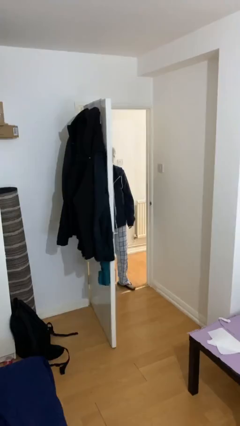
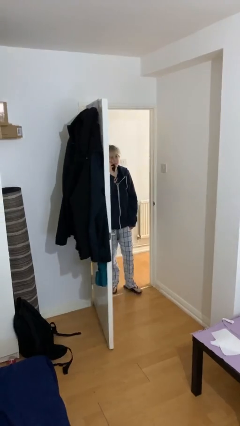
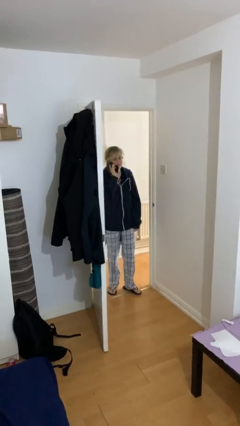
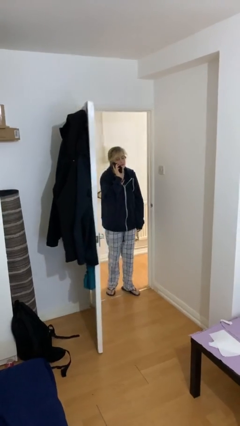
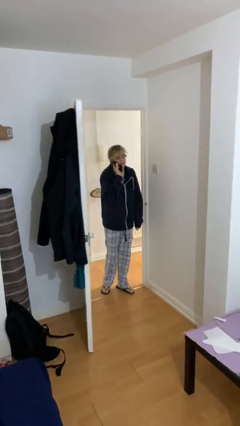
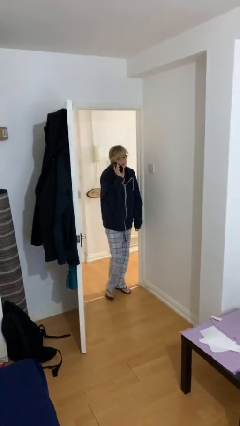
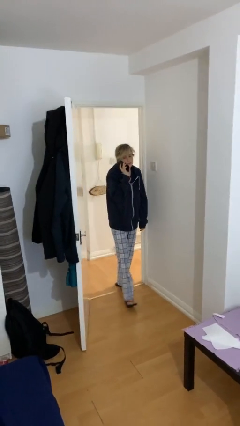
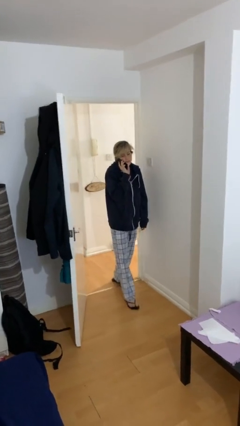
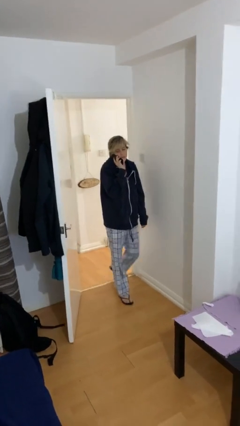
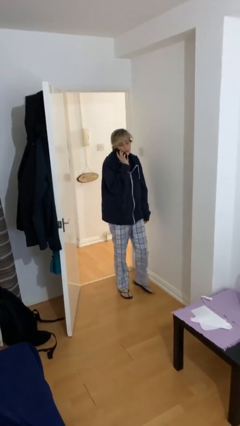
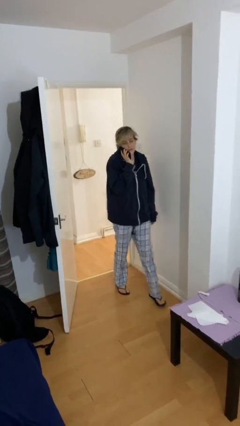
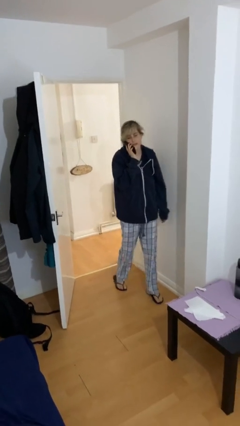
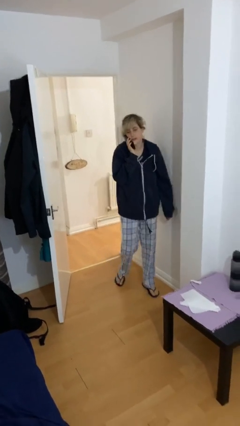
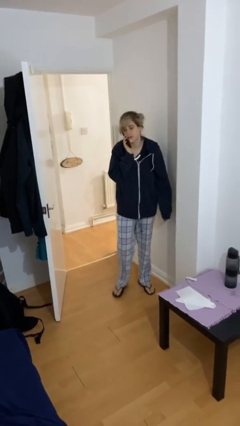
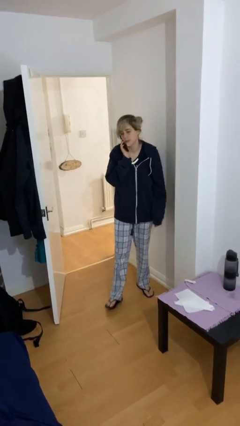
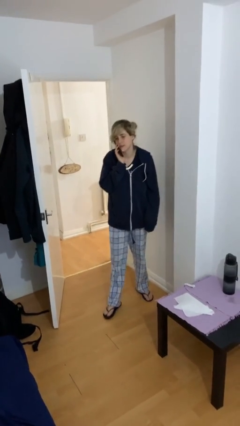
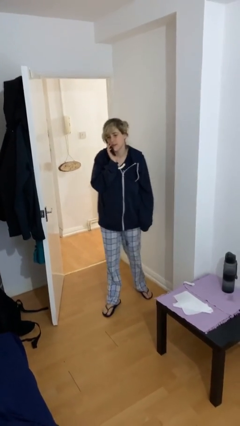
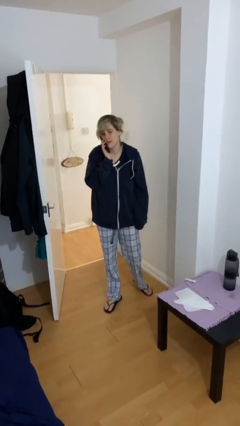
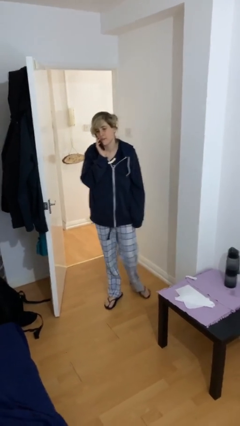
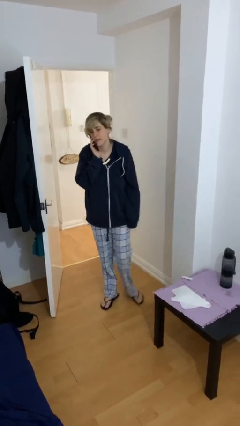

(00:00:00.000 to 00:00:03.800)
person enters scene through structure

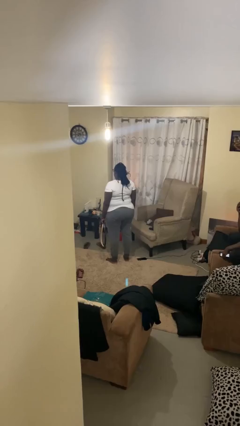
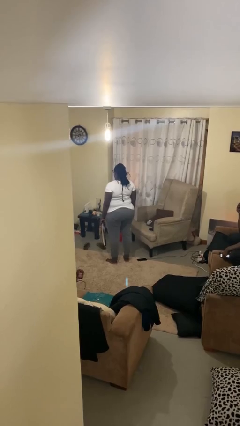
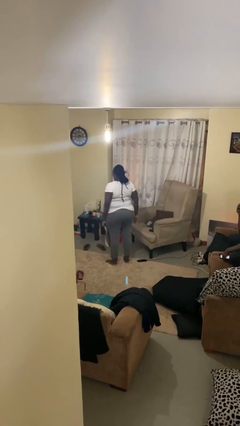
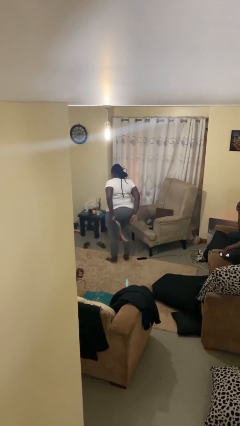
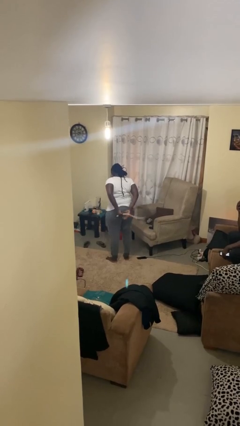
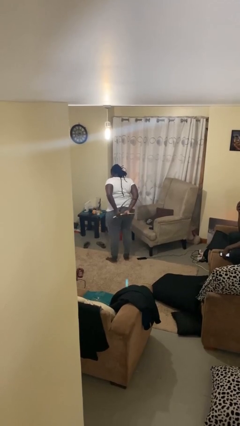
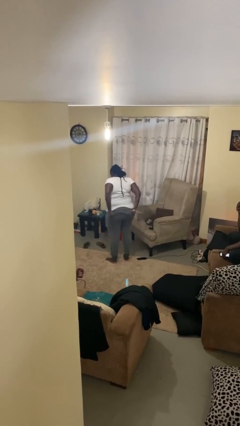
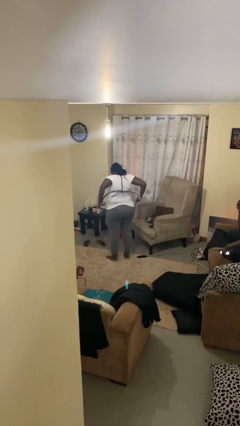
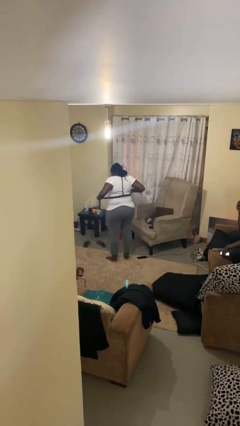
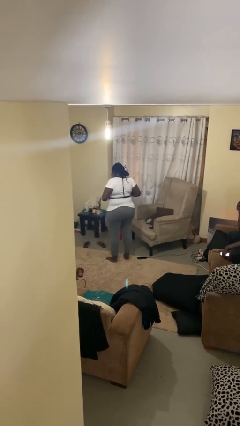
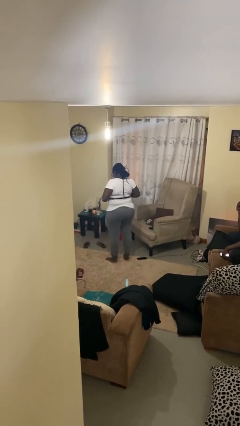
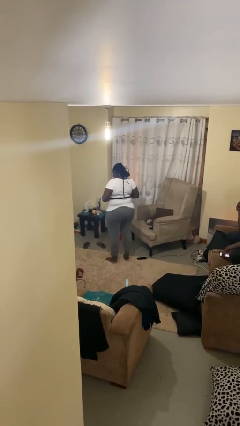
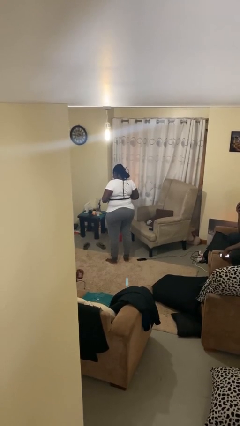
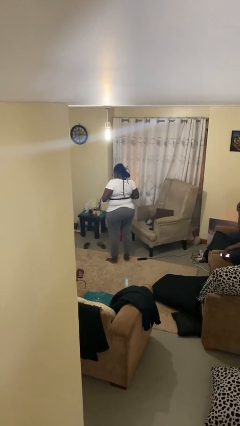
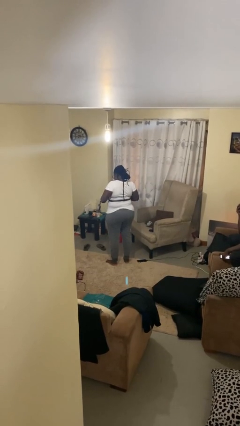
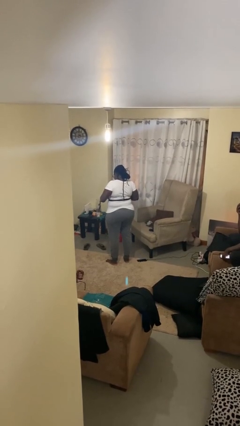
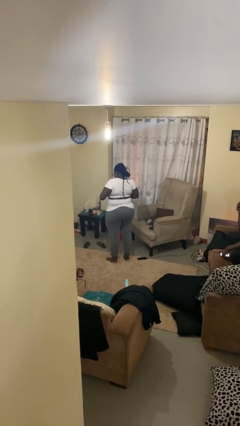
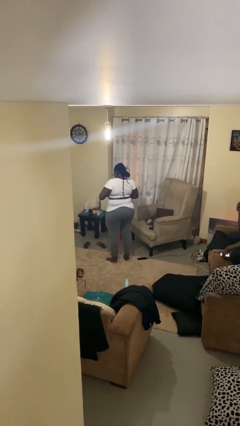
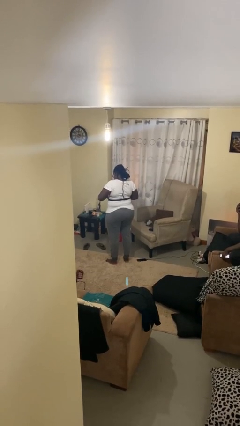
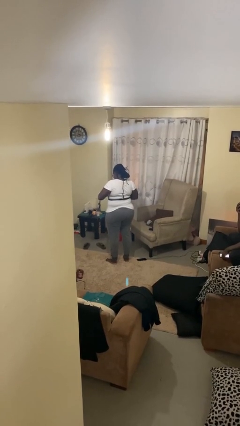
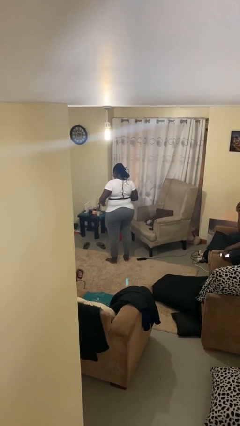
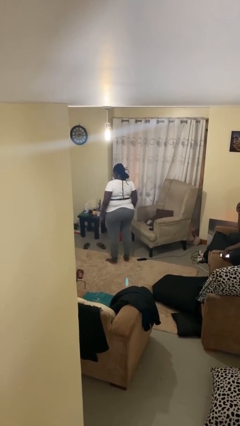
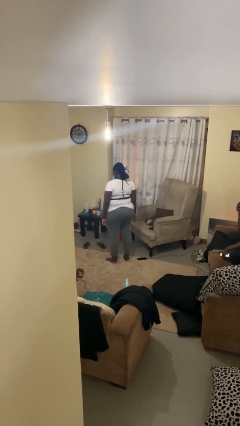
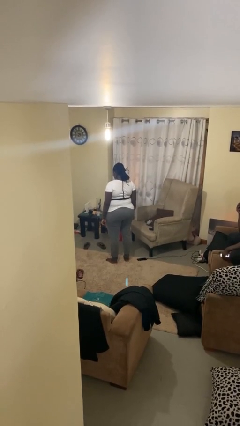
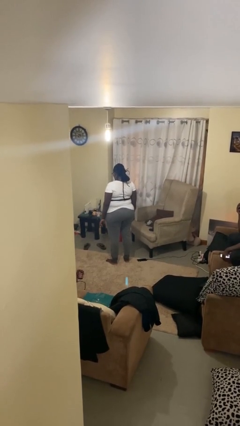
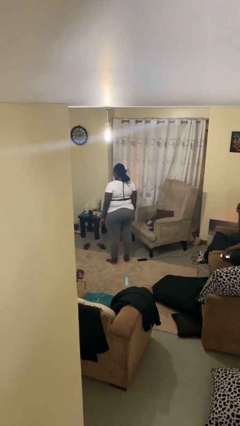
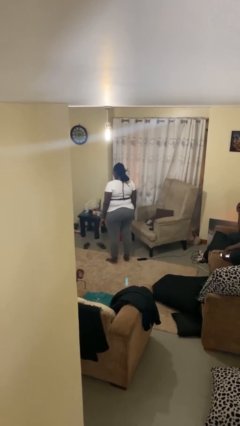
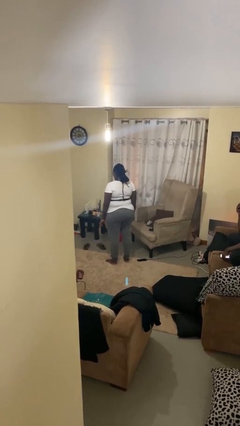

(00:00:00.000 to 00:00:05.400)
person puts on belt

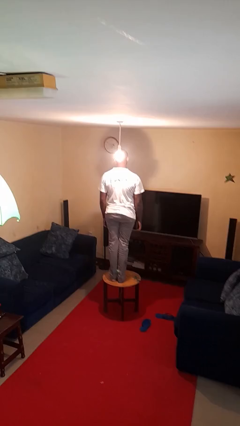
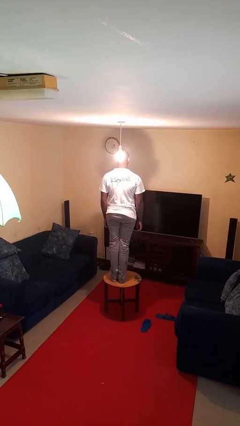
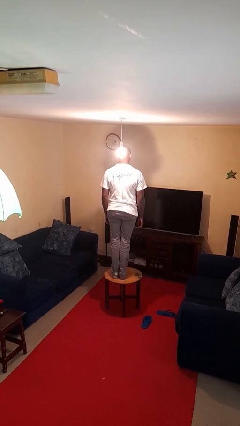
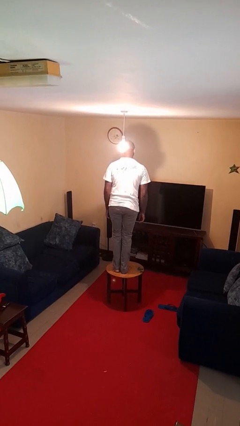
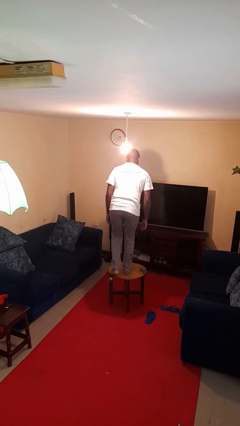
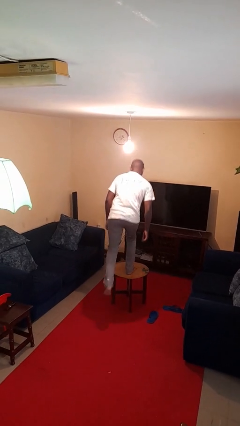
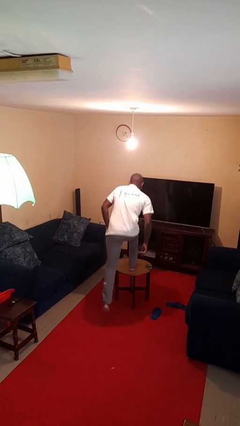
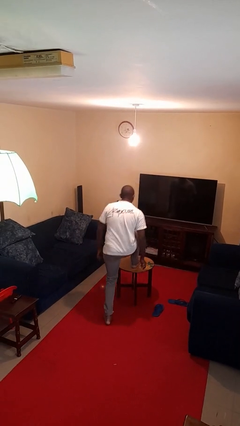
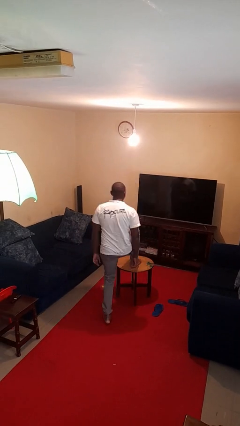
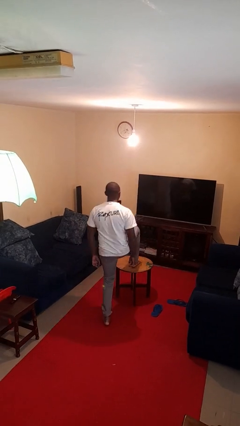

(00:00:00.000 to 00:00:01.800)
person climbs off table

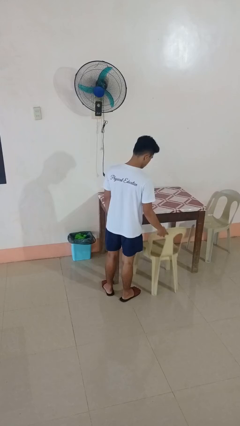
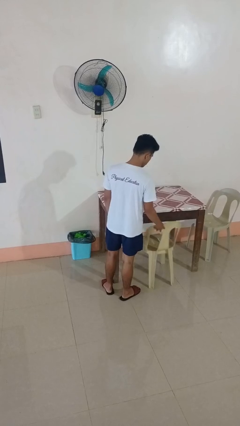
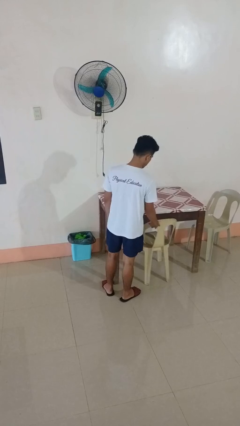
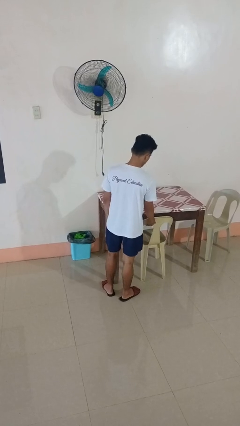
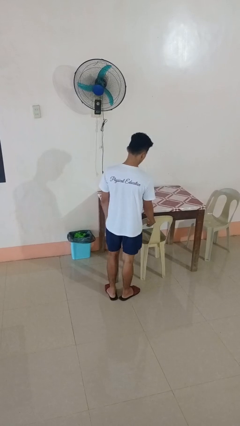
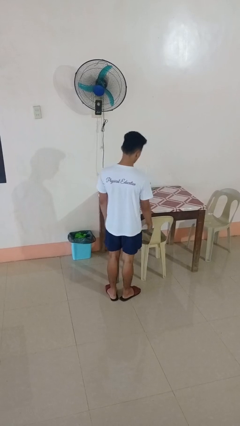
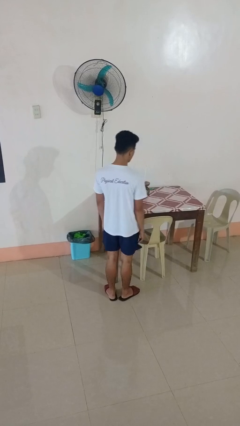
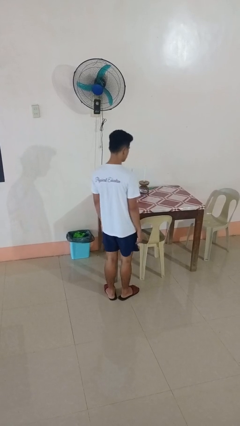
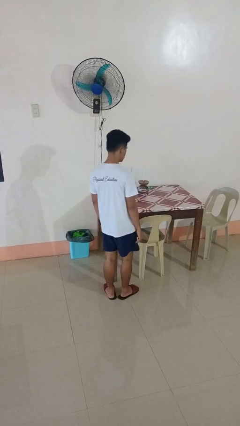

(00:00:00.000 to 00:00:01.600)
person pushes in chair

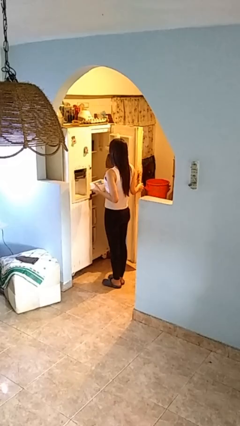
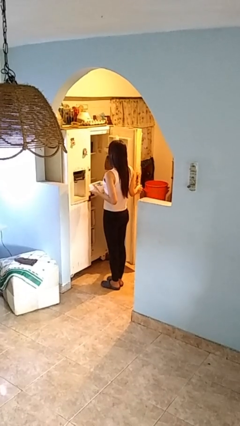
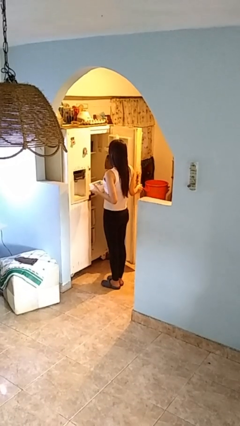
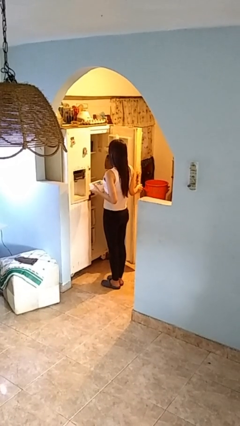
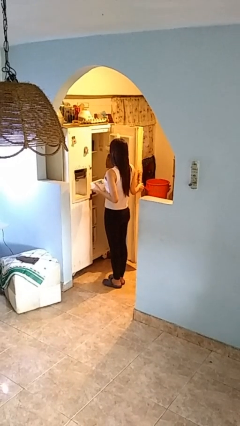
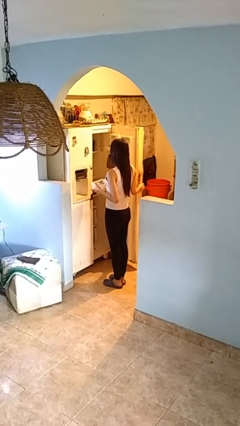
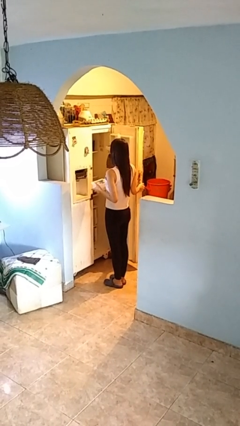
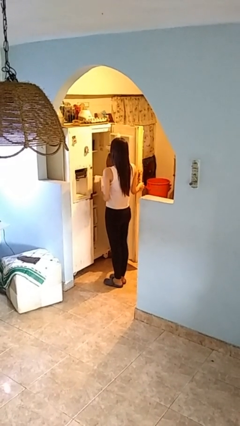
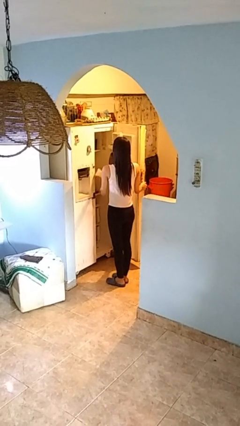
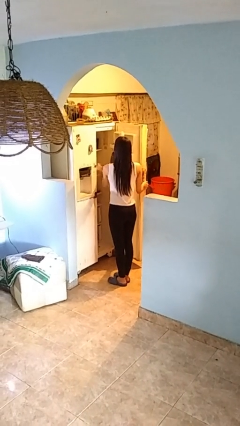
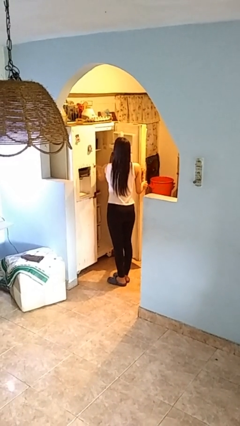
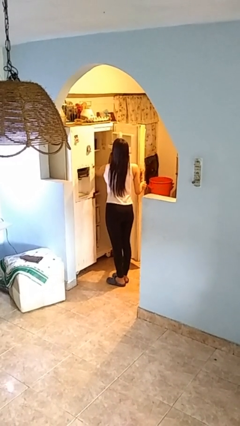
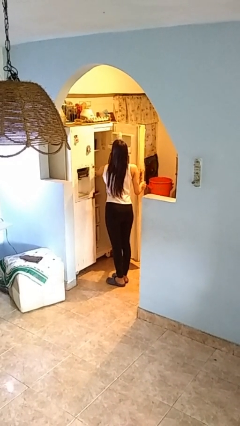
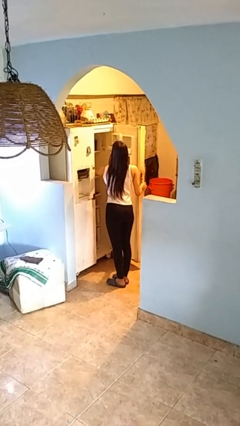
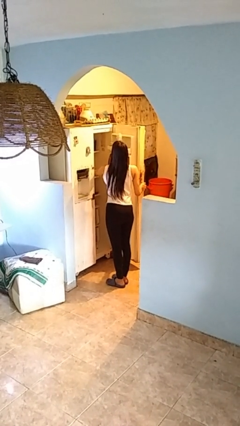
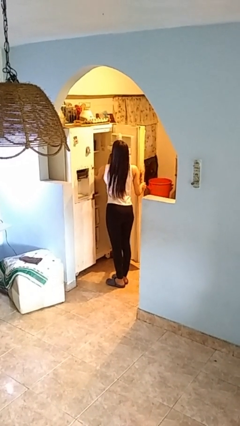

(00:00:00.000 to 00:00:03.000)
person puts object into refrigerator

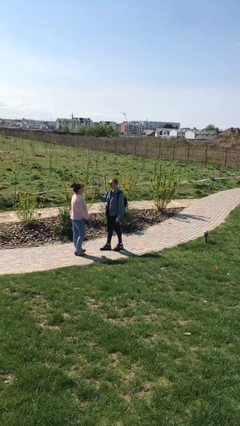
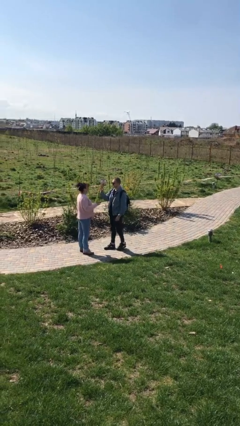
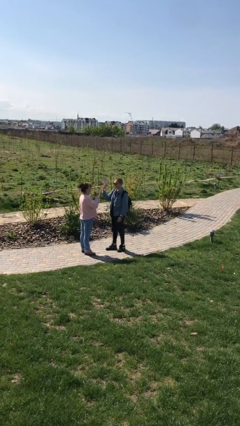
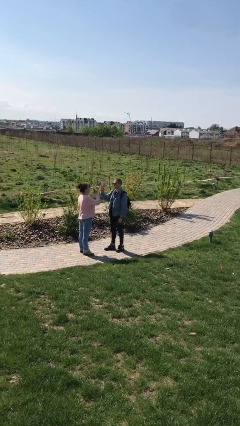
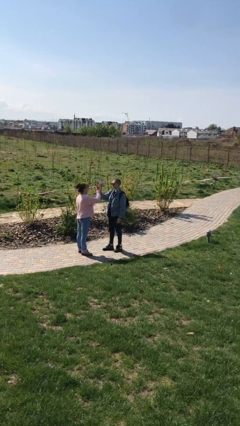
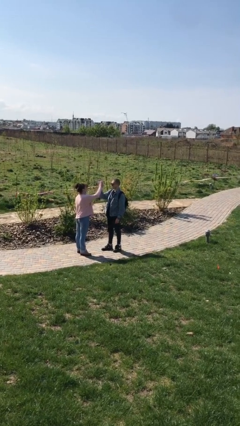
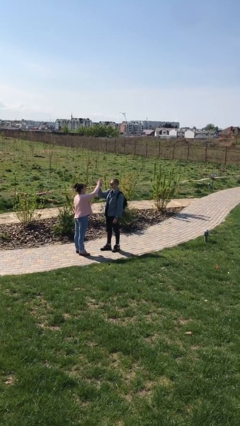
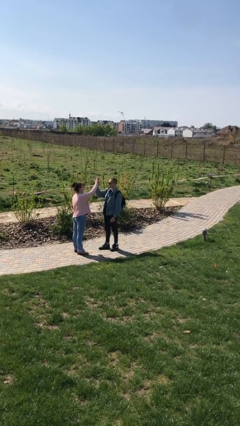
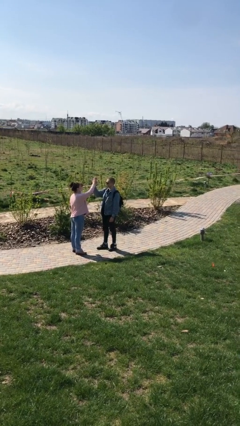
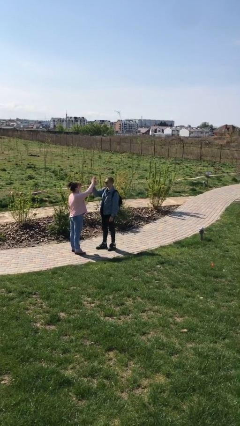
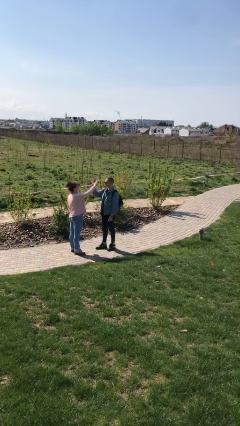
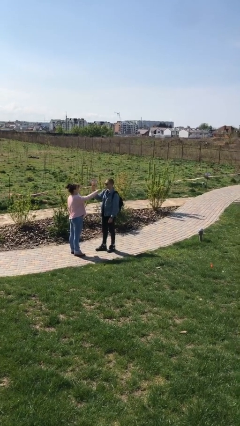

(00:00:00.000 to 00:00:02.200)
person highfives hand
